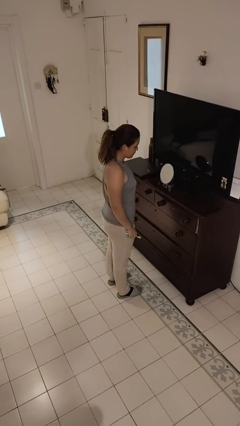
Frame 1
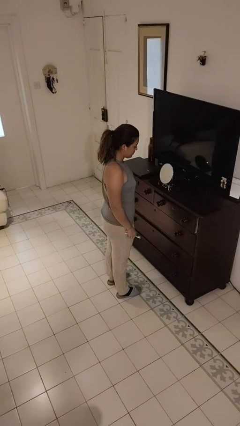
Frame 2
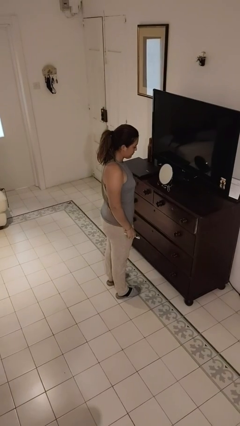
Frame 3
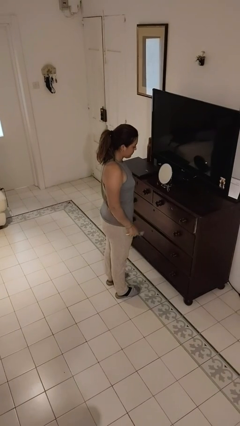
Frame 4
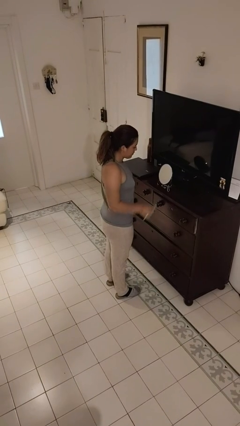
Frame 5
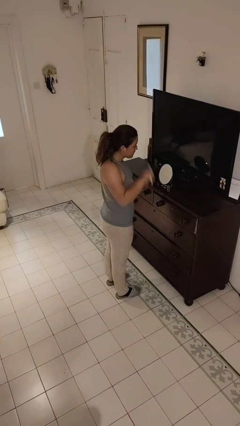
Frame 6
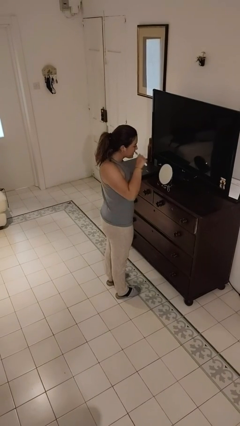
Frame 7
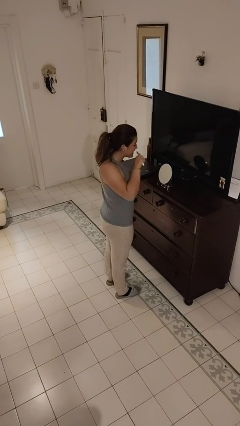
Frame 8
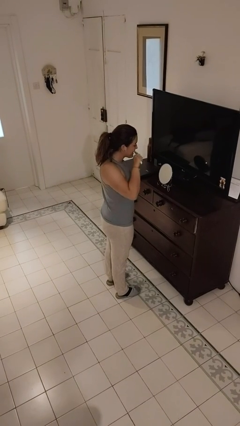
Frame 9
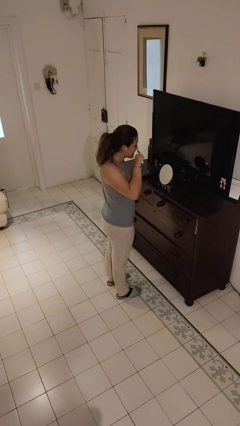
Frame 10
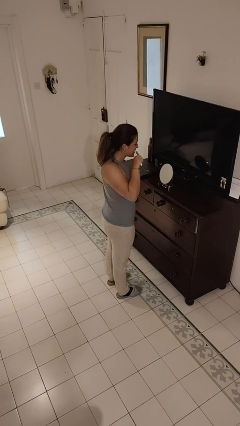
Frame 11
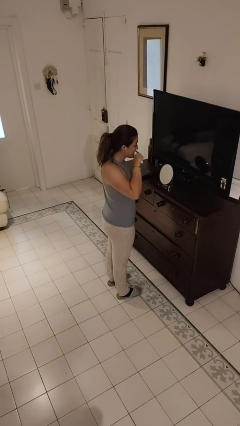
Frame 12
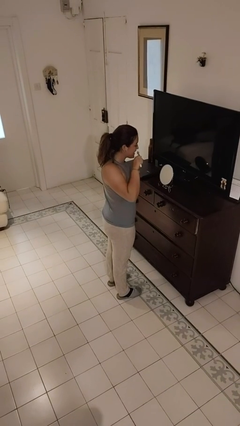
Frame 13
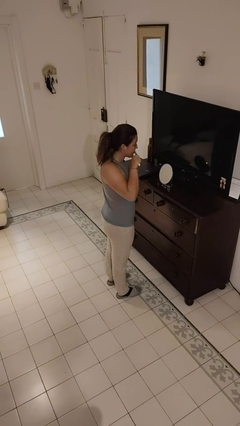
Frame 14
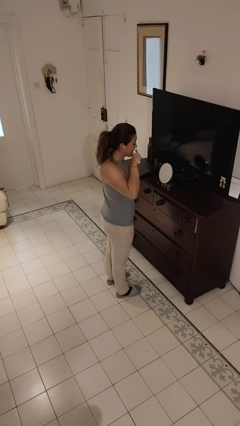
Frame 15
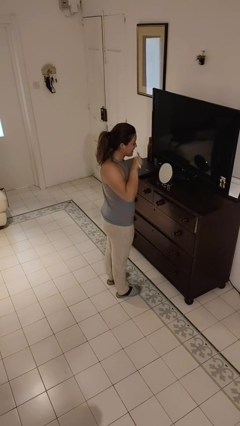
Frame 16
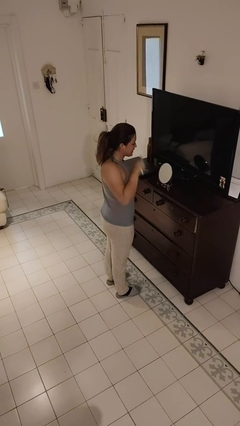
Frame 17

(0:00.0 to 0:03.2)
person brushes teeth

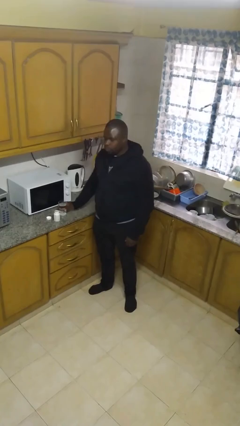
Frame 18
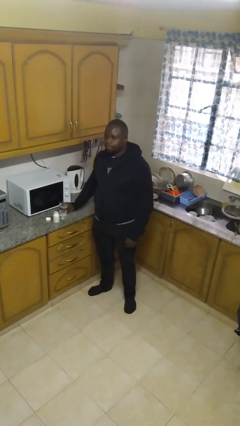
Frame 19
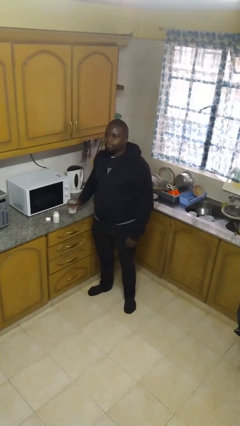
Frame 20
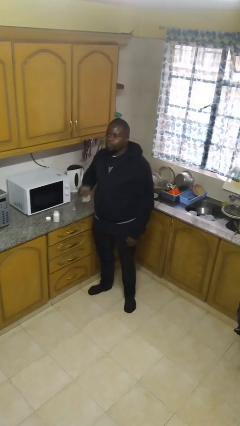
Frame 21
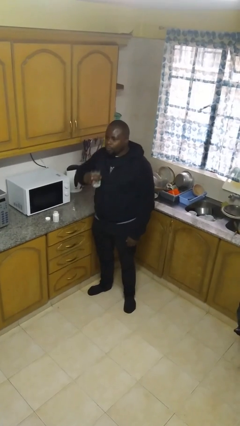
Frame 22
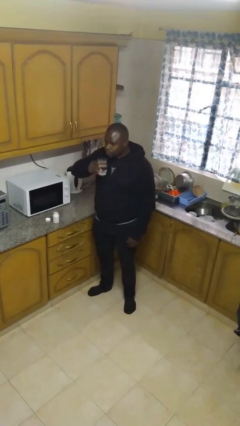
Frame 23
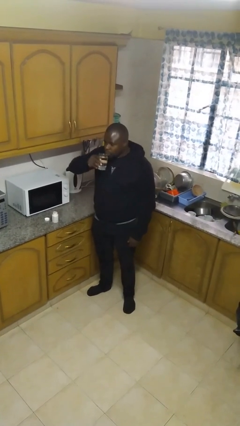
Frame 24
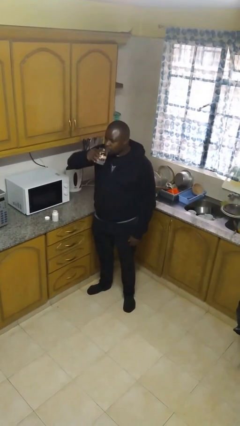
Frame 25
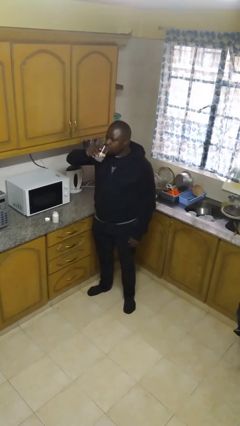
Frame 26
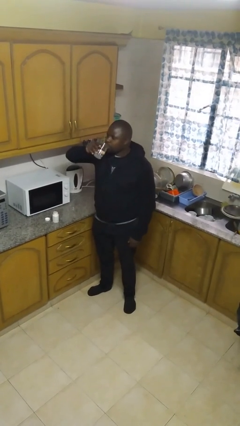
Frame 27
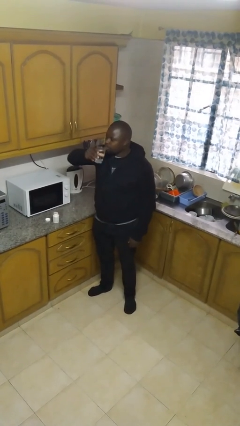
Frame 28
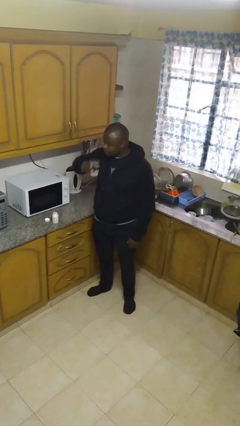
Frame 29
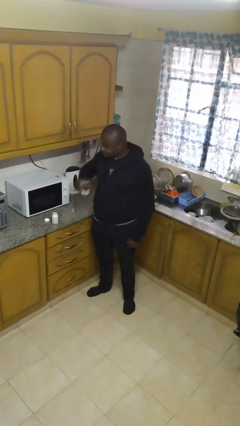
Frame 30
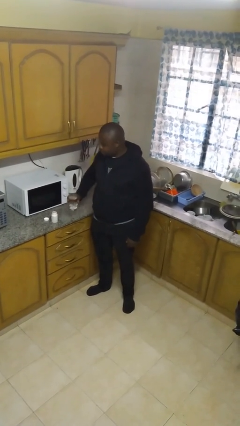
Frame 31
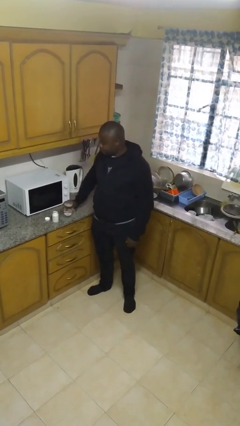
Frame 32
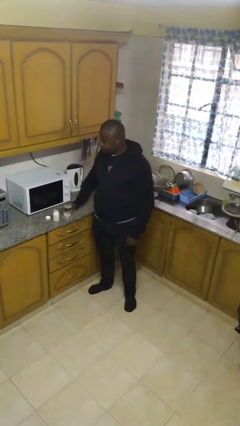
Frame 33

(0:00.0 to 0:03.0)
person drinks from cup

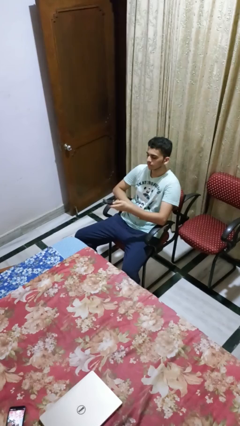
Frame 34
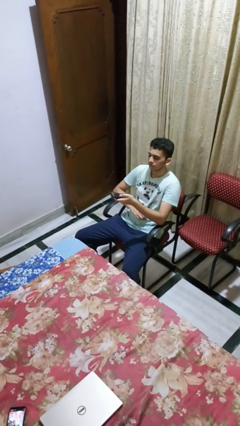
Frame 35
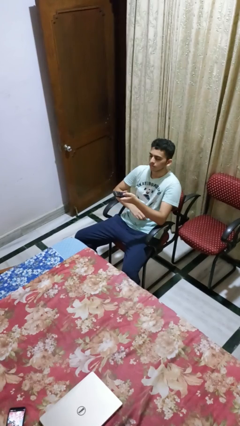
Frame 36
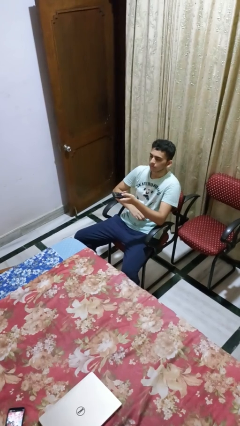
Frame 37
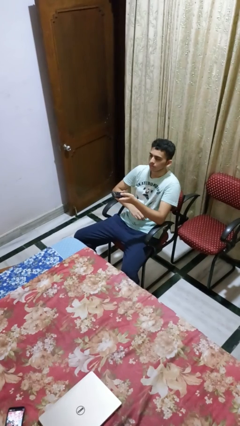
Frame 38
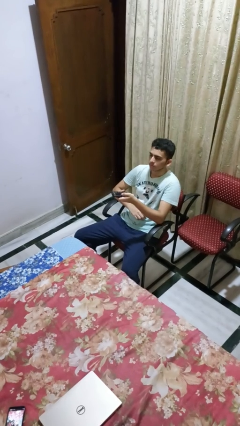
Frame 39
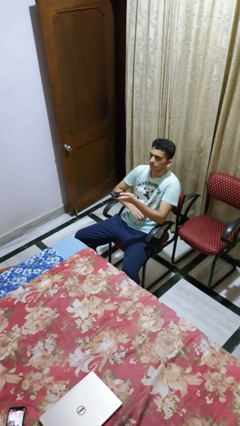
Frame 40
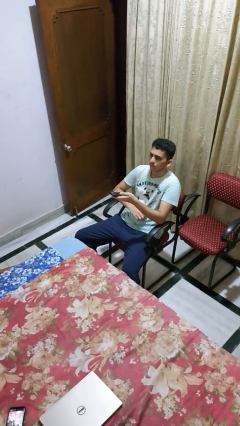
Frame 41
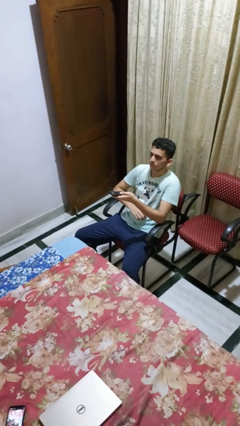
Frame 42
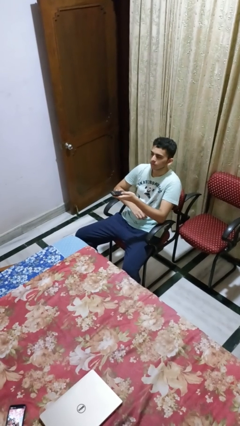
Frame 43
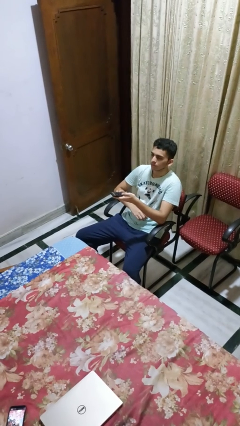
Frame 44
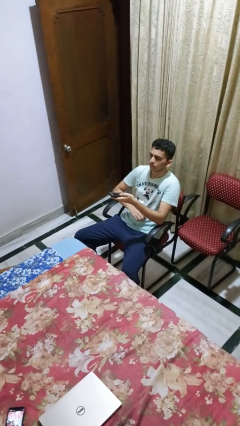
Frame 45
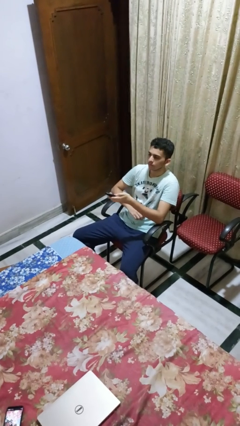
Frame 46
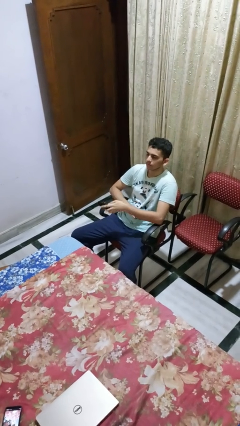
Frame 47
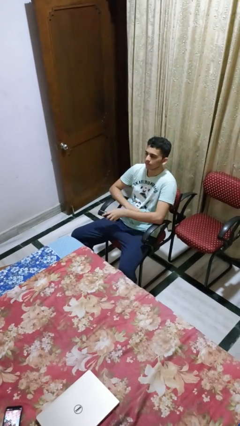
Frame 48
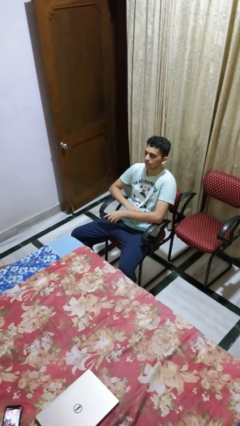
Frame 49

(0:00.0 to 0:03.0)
person uses television remote

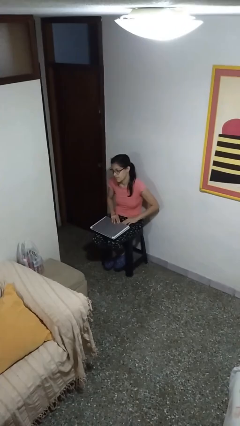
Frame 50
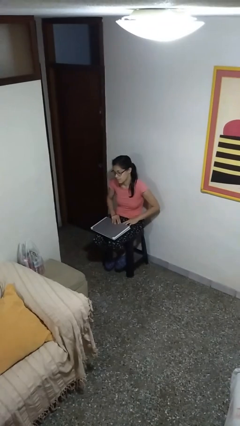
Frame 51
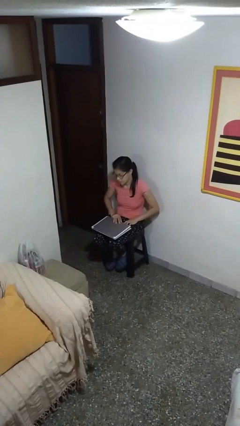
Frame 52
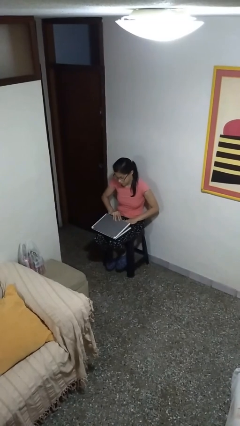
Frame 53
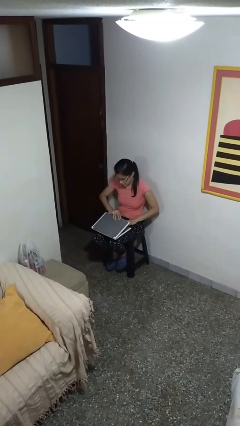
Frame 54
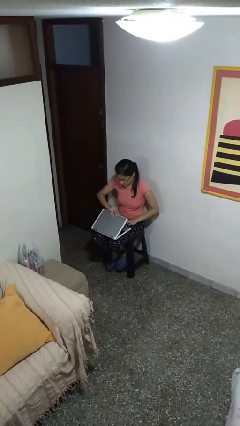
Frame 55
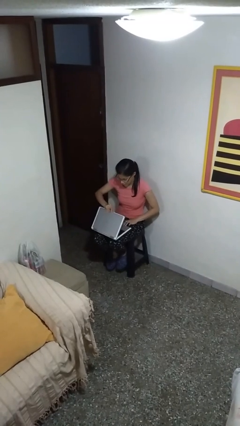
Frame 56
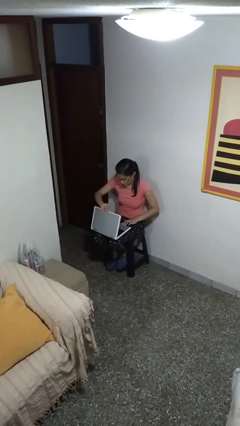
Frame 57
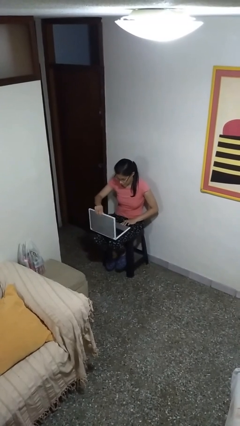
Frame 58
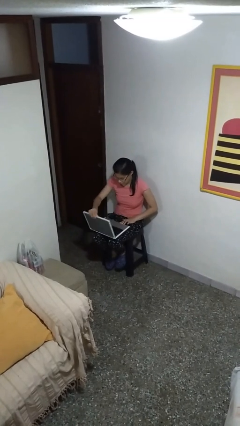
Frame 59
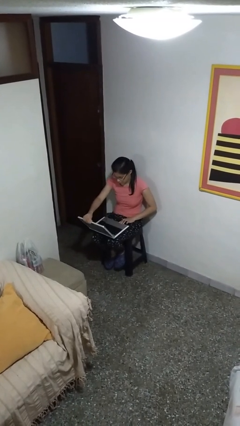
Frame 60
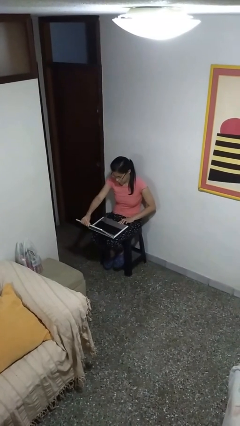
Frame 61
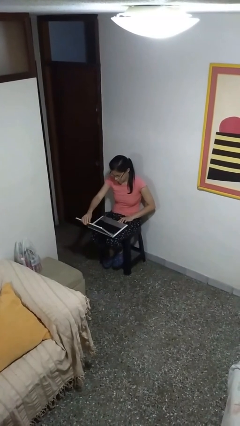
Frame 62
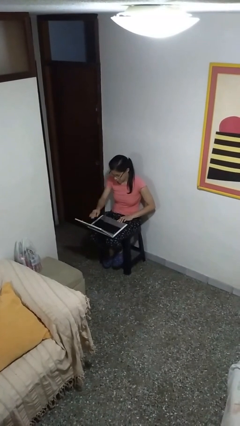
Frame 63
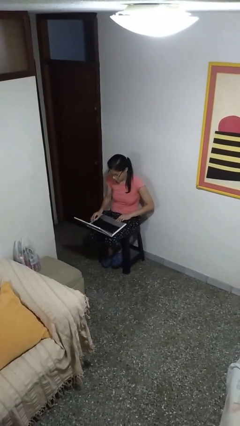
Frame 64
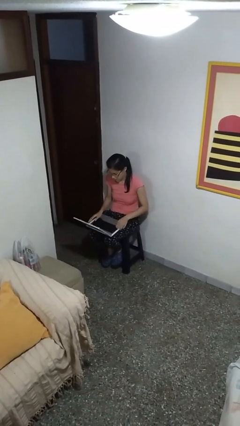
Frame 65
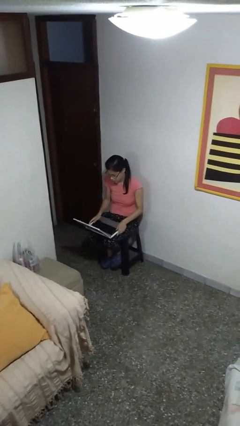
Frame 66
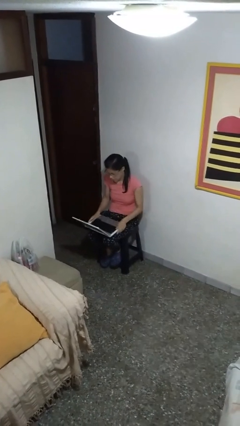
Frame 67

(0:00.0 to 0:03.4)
person opens laptop

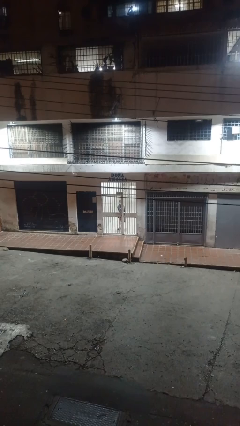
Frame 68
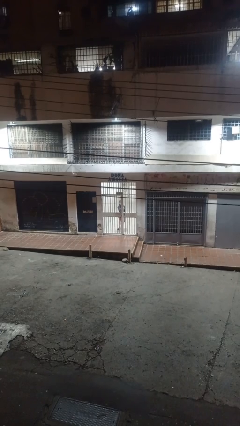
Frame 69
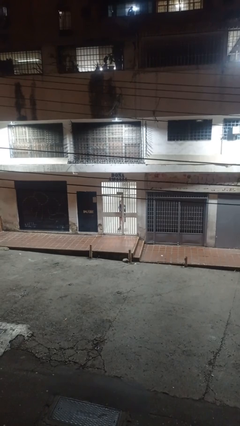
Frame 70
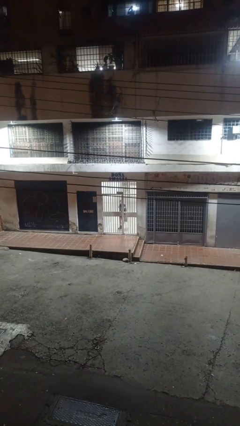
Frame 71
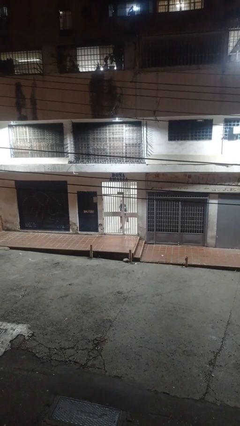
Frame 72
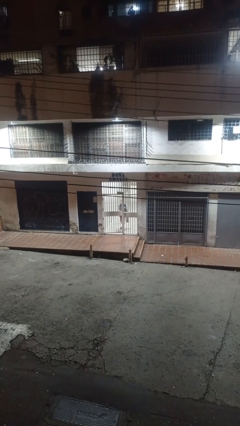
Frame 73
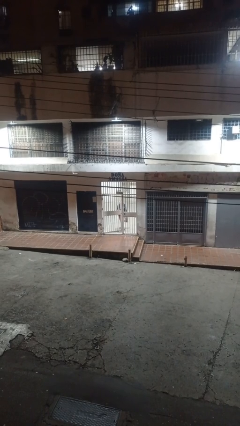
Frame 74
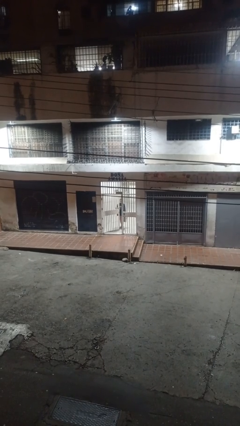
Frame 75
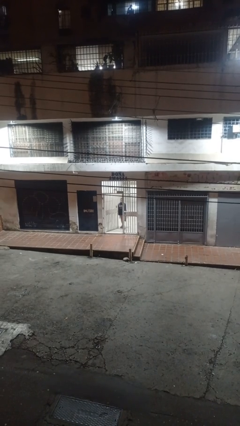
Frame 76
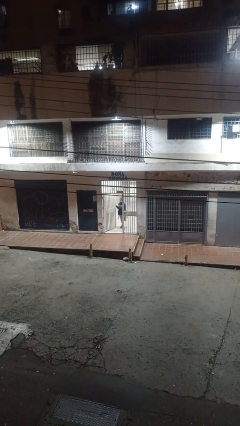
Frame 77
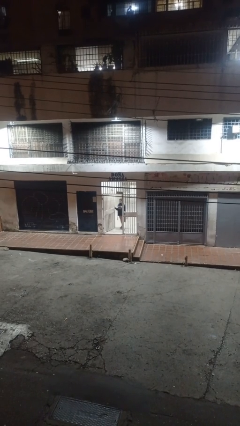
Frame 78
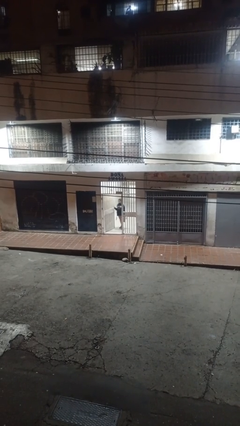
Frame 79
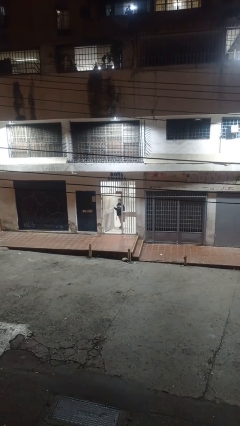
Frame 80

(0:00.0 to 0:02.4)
person opens gate

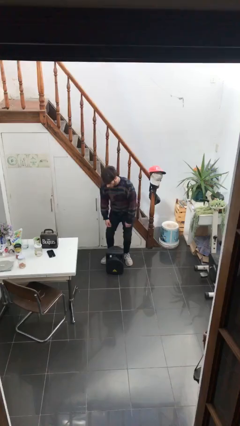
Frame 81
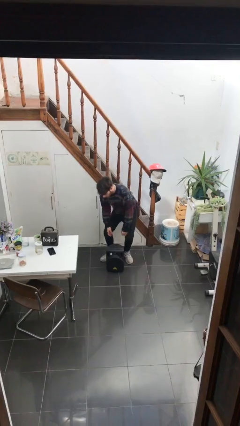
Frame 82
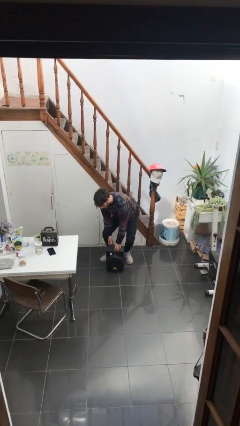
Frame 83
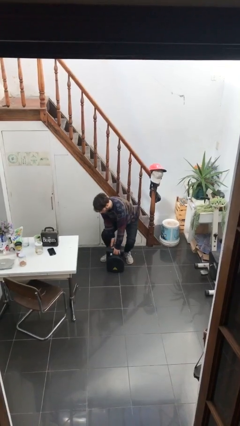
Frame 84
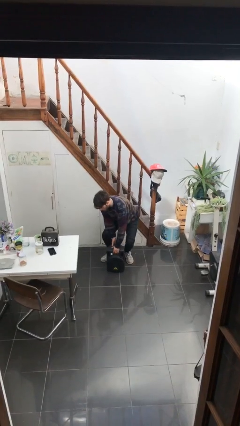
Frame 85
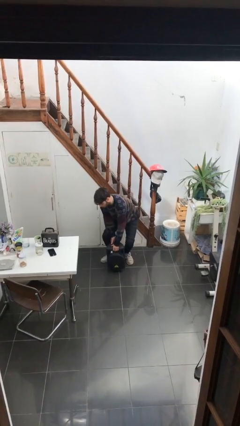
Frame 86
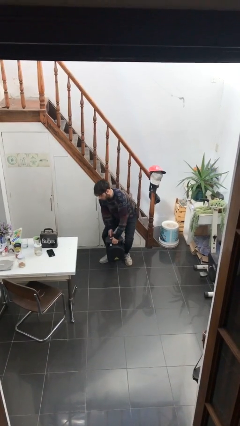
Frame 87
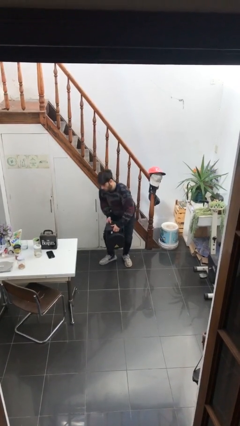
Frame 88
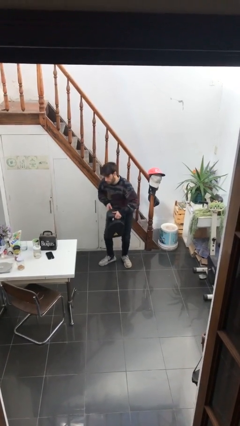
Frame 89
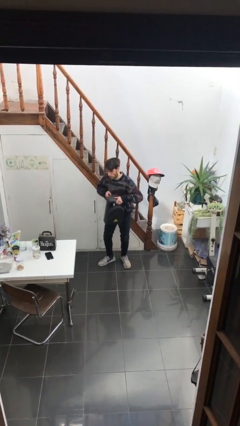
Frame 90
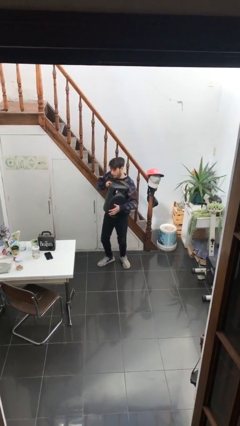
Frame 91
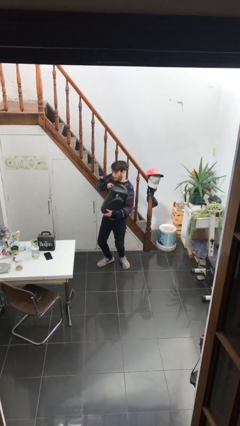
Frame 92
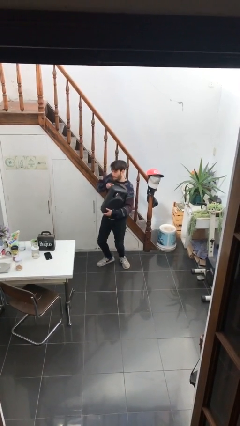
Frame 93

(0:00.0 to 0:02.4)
person picks up object from floor
